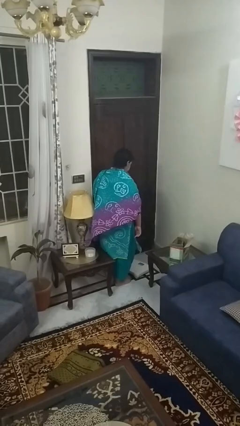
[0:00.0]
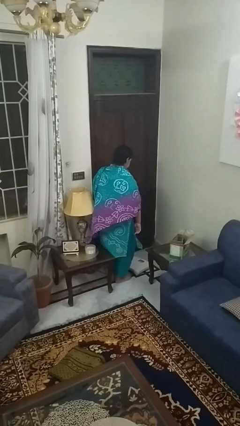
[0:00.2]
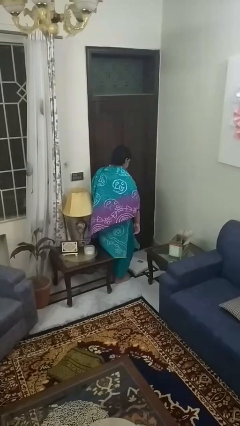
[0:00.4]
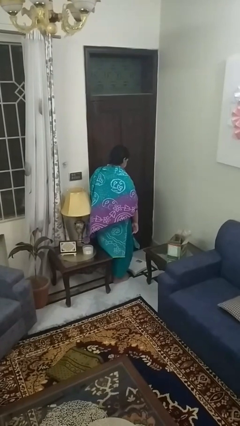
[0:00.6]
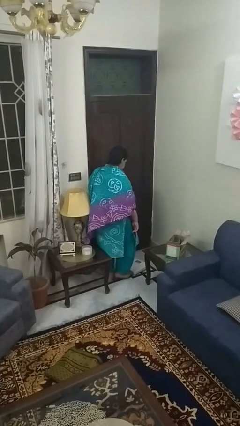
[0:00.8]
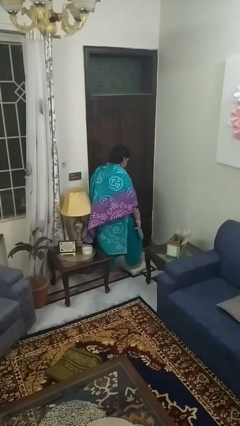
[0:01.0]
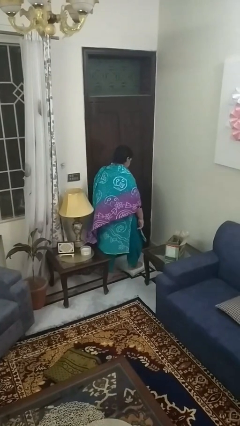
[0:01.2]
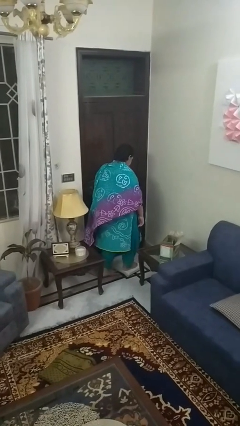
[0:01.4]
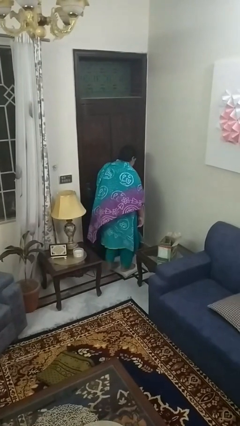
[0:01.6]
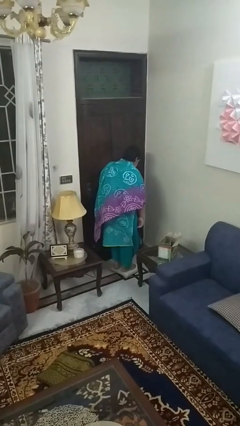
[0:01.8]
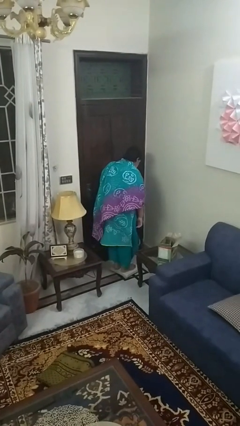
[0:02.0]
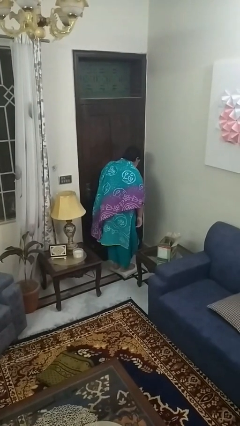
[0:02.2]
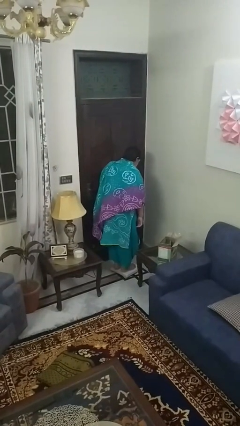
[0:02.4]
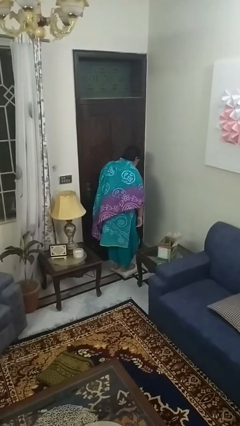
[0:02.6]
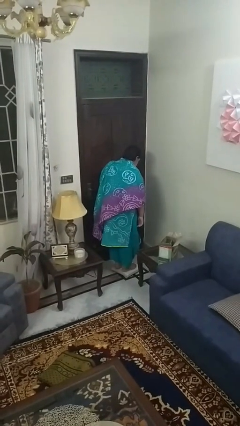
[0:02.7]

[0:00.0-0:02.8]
person uses bodyweight scale

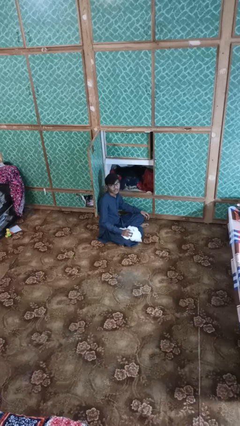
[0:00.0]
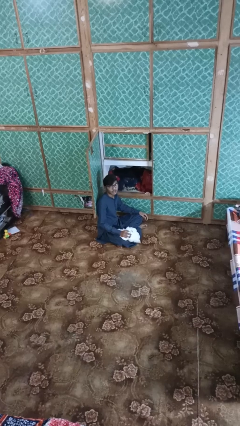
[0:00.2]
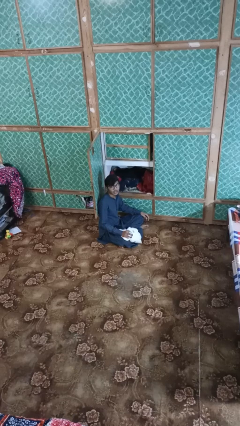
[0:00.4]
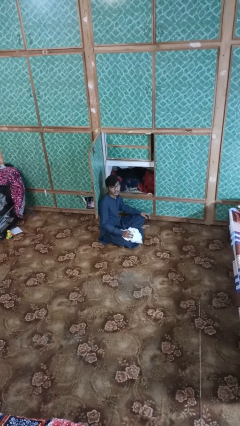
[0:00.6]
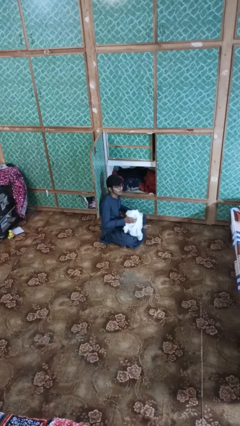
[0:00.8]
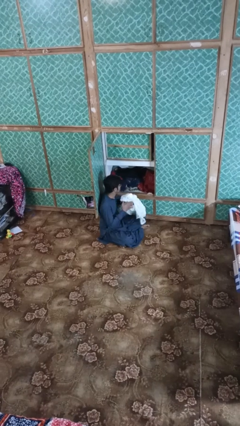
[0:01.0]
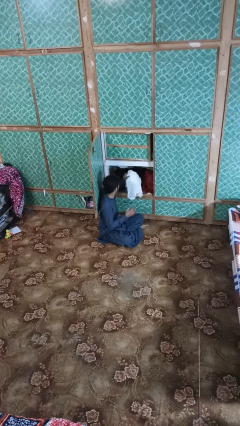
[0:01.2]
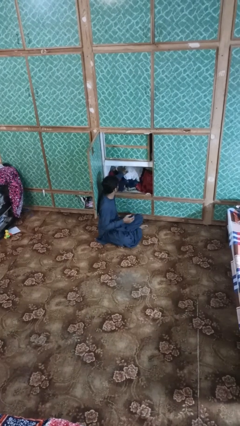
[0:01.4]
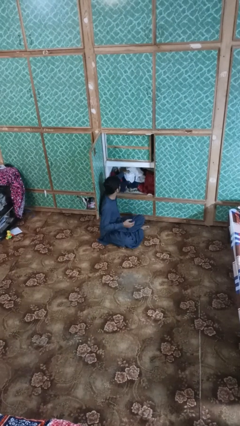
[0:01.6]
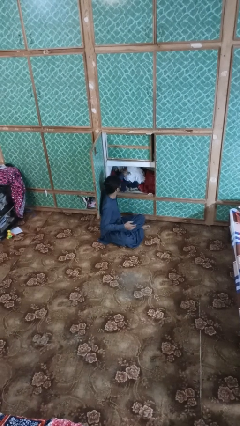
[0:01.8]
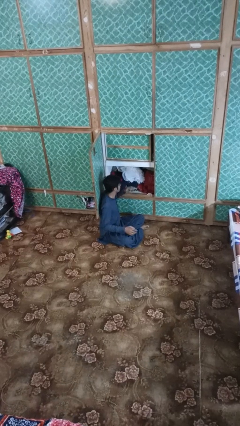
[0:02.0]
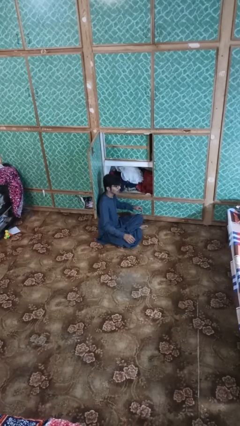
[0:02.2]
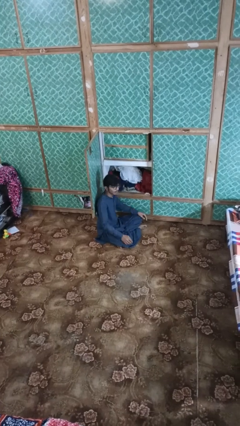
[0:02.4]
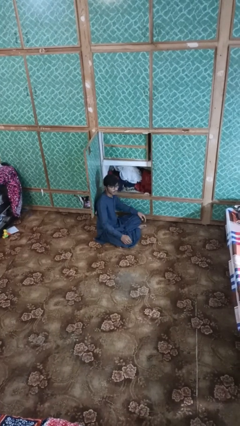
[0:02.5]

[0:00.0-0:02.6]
person puts clothes into dresser

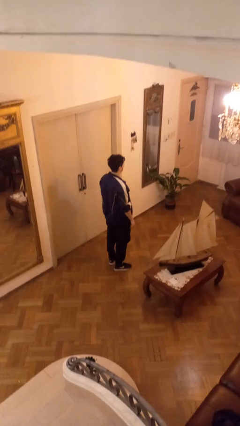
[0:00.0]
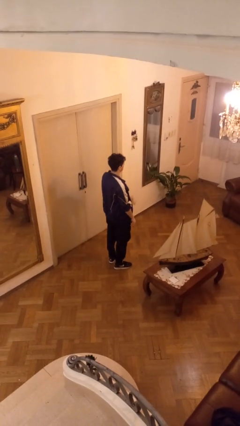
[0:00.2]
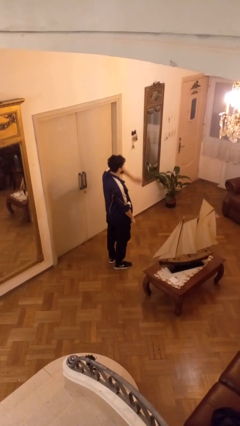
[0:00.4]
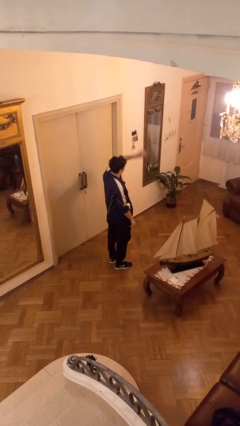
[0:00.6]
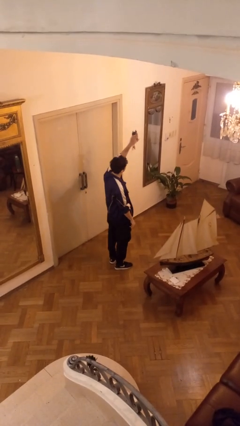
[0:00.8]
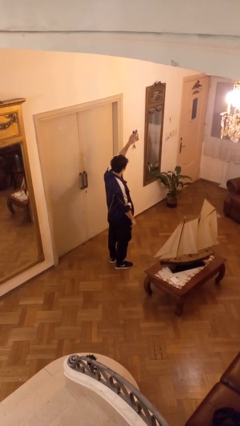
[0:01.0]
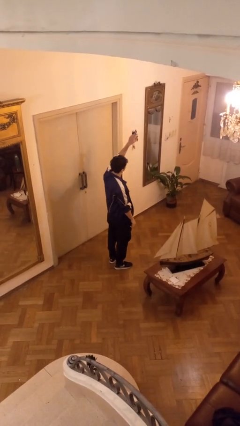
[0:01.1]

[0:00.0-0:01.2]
person gestures swipe up

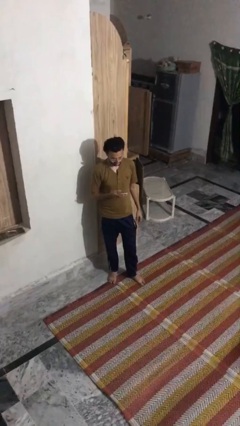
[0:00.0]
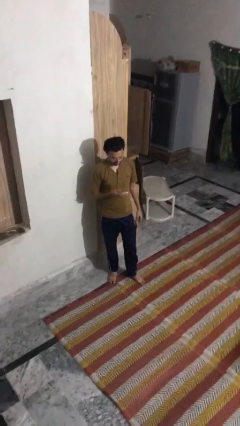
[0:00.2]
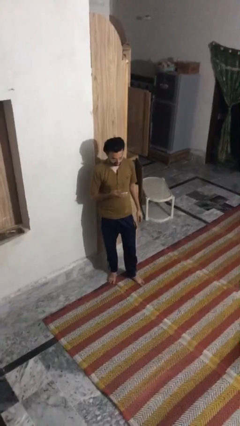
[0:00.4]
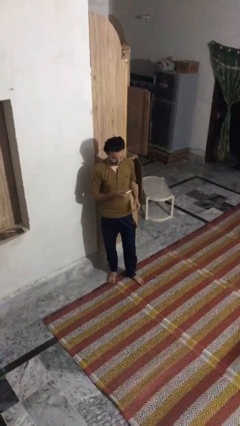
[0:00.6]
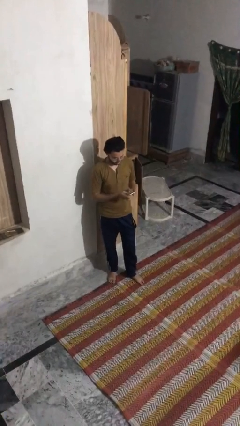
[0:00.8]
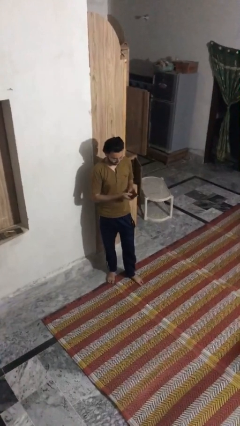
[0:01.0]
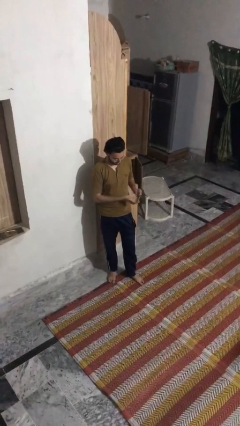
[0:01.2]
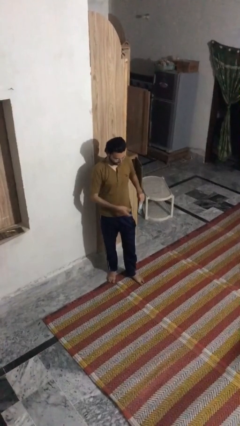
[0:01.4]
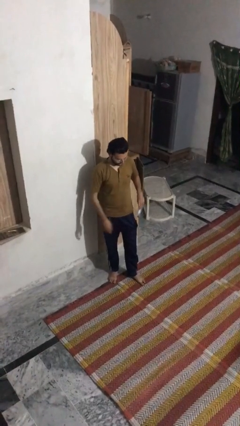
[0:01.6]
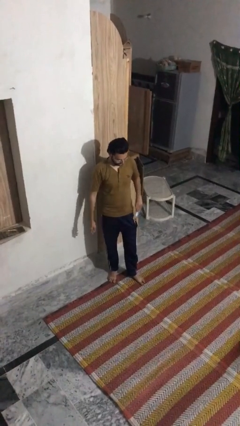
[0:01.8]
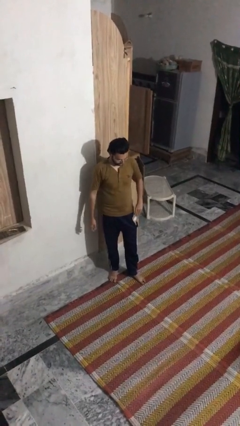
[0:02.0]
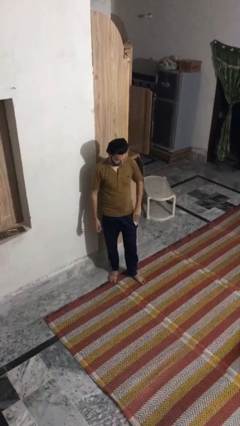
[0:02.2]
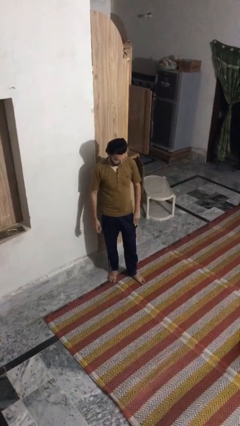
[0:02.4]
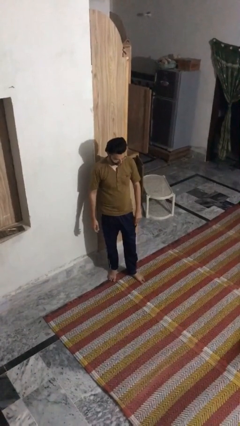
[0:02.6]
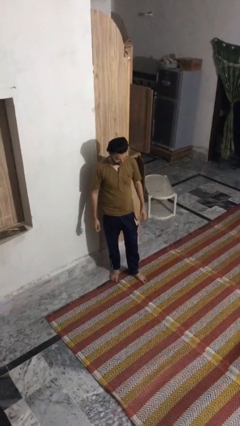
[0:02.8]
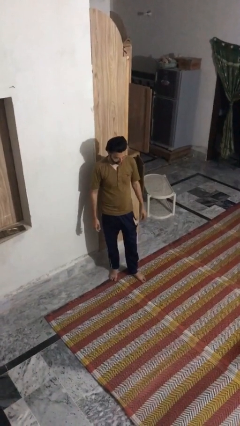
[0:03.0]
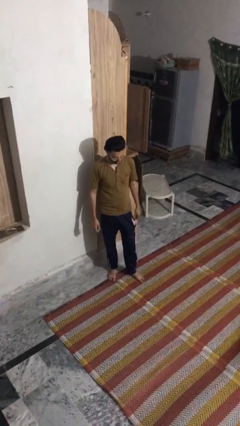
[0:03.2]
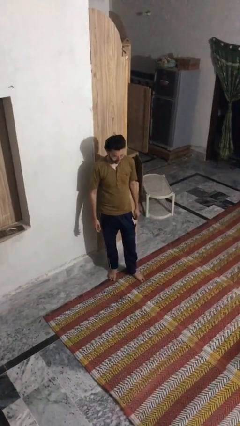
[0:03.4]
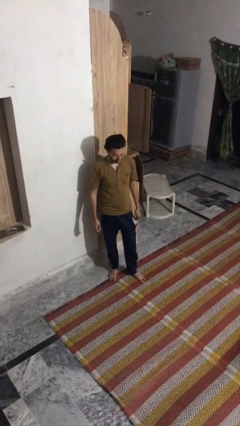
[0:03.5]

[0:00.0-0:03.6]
person puts phone into pocket

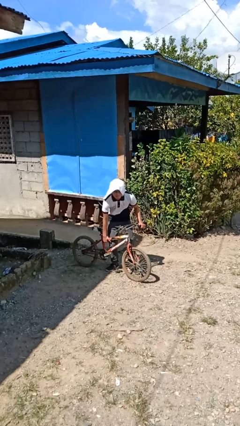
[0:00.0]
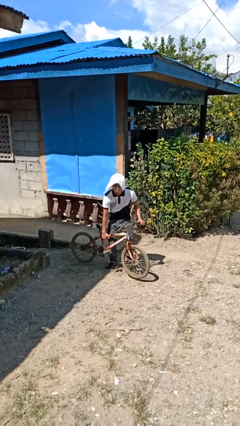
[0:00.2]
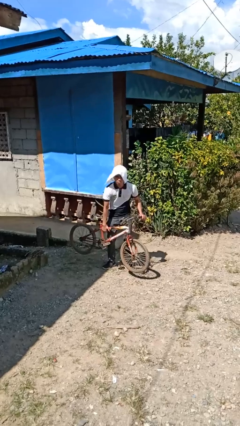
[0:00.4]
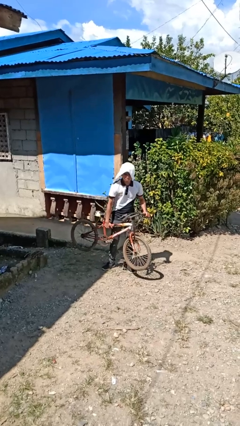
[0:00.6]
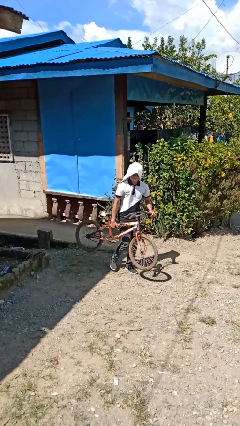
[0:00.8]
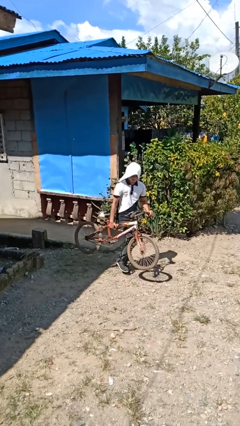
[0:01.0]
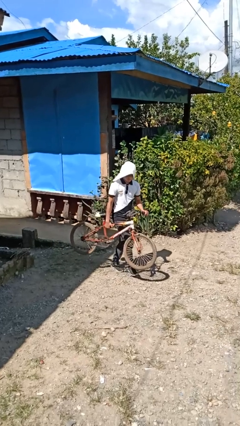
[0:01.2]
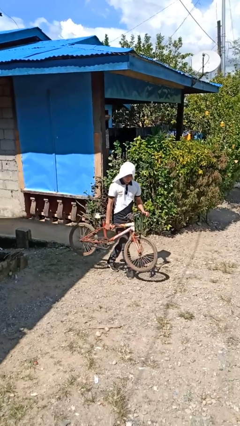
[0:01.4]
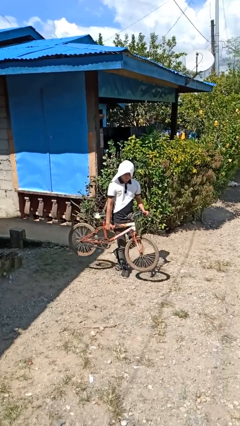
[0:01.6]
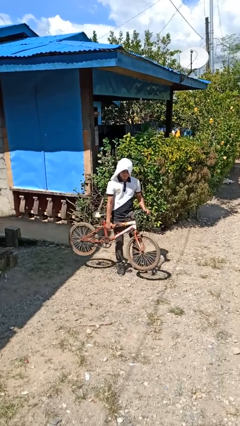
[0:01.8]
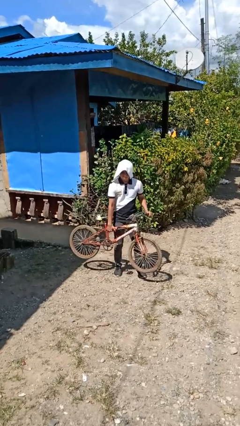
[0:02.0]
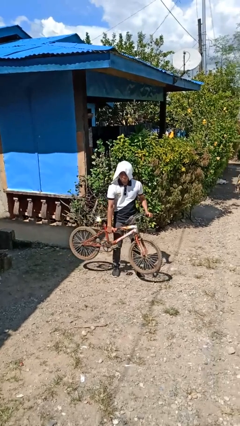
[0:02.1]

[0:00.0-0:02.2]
person carries bicycle

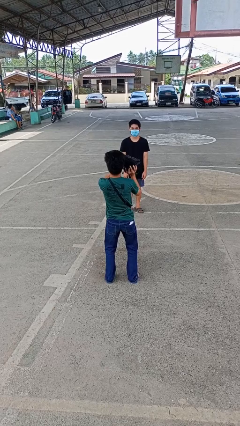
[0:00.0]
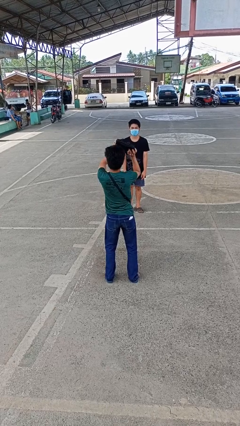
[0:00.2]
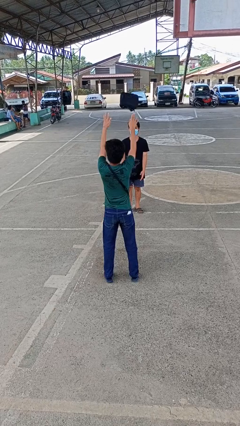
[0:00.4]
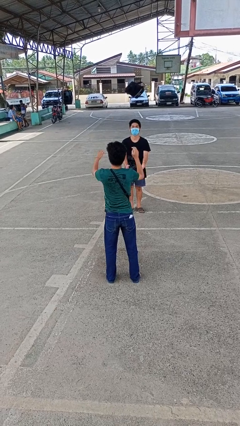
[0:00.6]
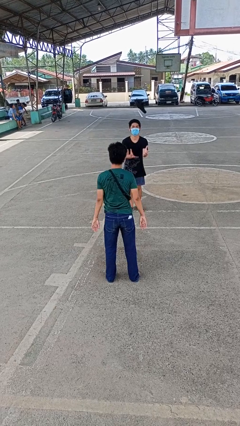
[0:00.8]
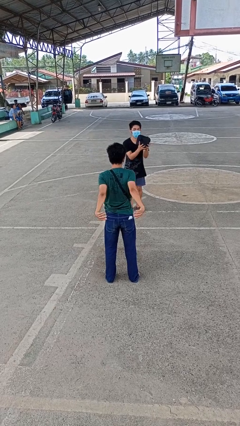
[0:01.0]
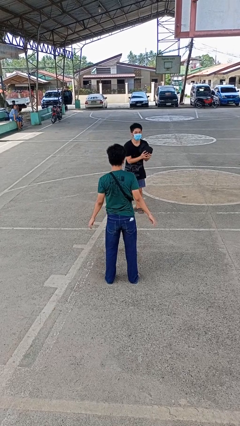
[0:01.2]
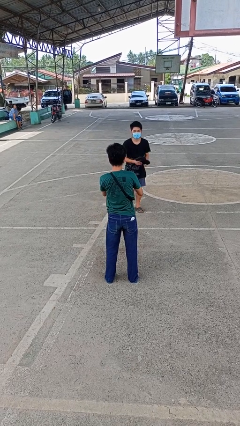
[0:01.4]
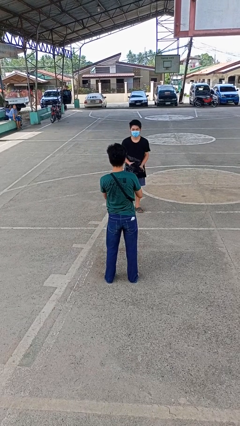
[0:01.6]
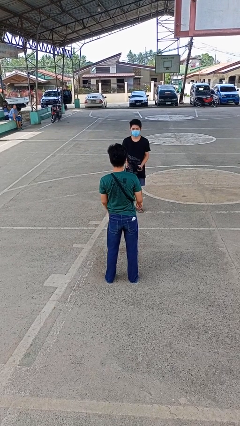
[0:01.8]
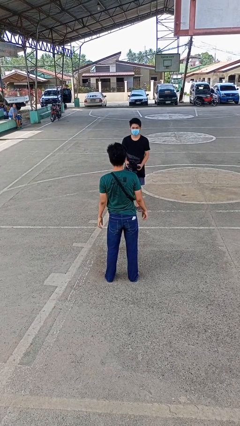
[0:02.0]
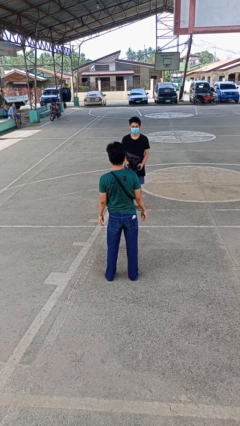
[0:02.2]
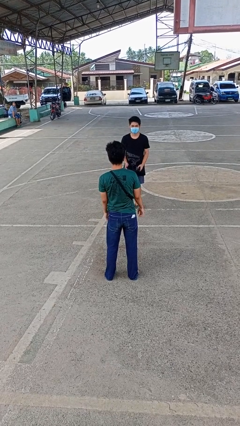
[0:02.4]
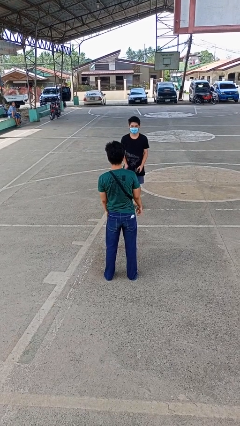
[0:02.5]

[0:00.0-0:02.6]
person throws object to person

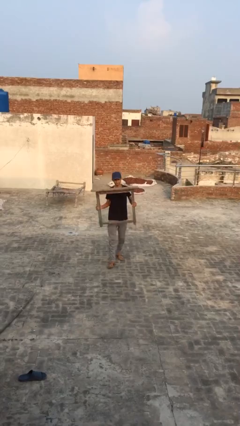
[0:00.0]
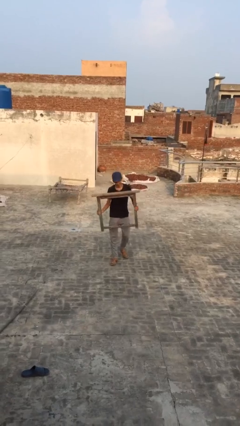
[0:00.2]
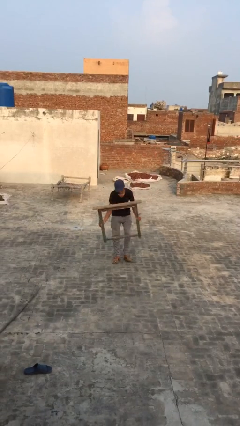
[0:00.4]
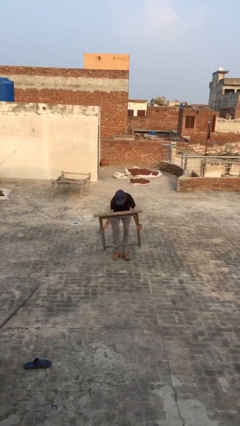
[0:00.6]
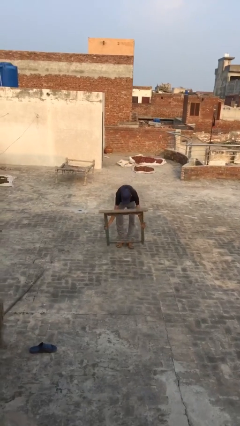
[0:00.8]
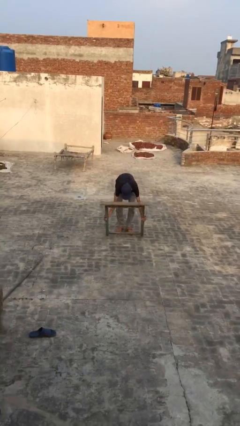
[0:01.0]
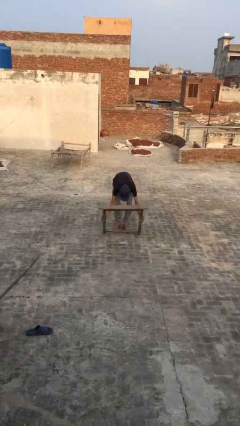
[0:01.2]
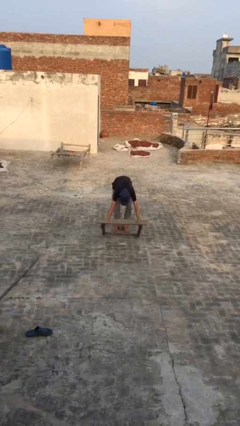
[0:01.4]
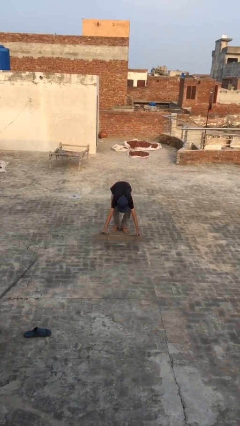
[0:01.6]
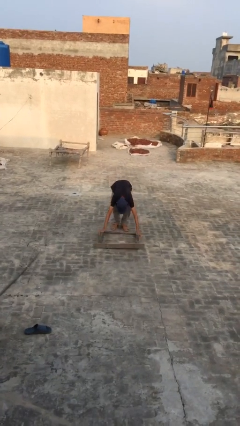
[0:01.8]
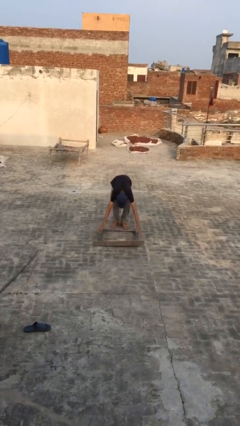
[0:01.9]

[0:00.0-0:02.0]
person puts down object on floor
